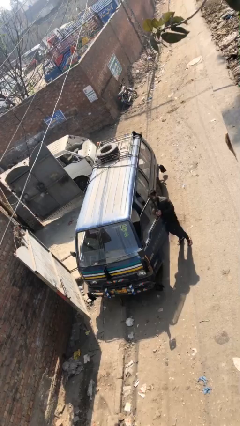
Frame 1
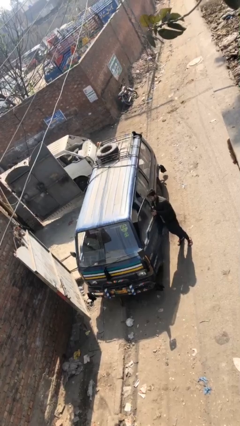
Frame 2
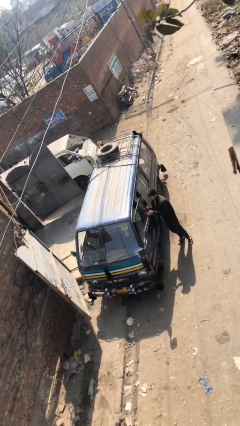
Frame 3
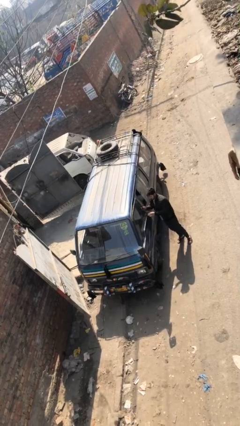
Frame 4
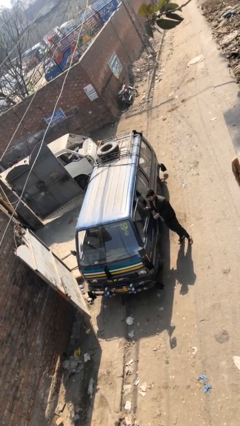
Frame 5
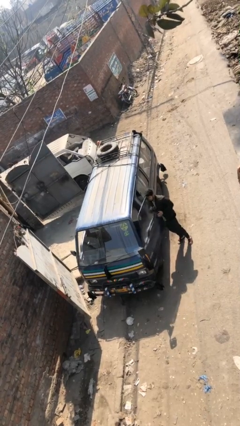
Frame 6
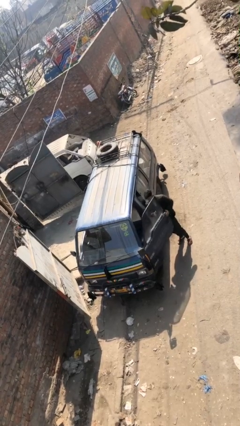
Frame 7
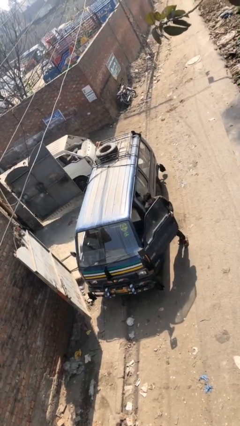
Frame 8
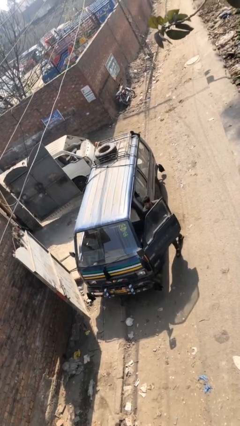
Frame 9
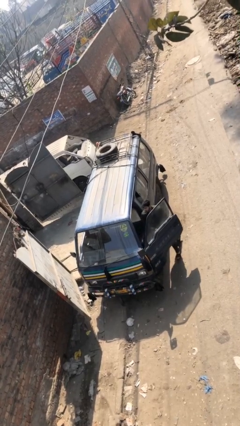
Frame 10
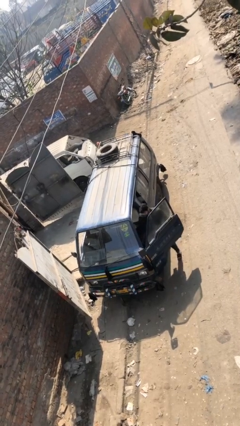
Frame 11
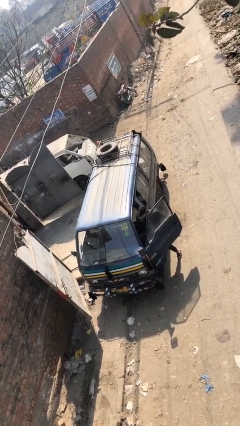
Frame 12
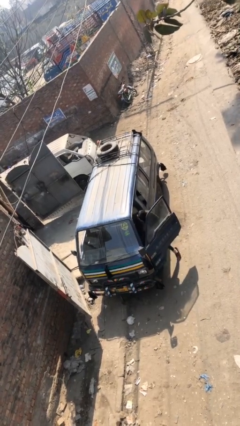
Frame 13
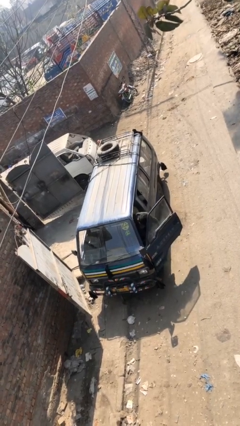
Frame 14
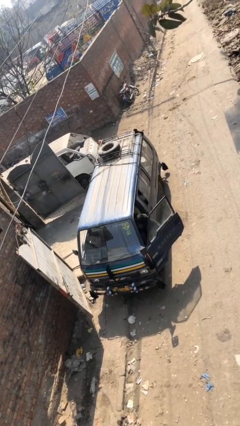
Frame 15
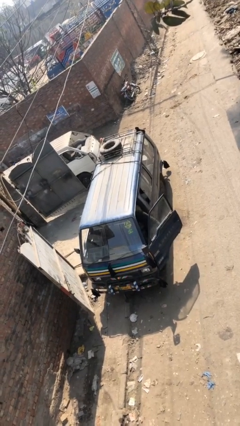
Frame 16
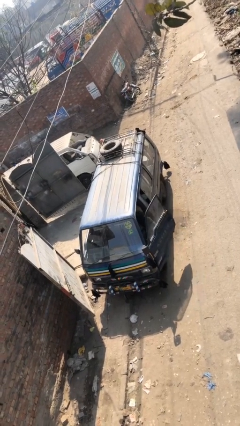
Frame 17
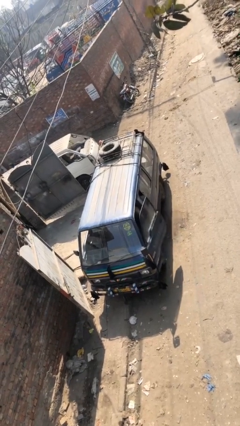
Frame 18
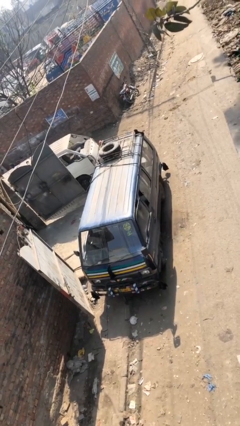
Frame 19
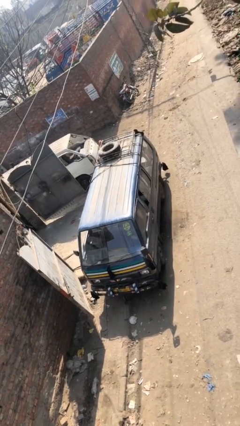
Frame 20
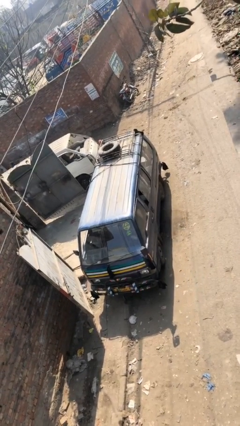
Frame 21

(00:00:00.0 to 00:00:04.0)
car picks up person

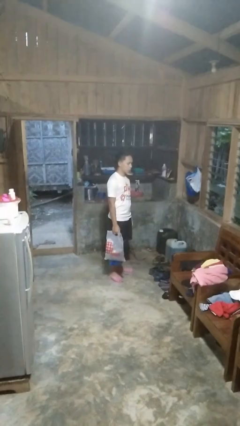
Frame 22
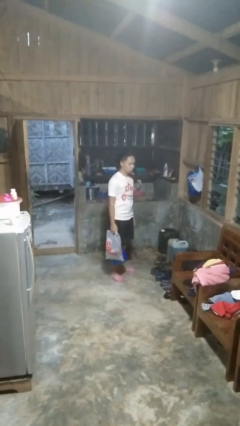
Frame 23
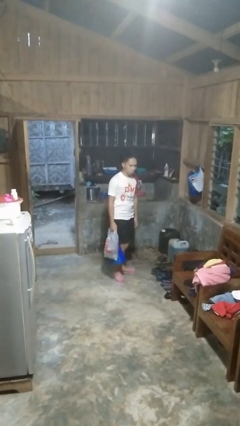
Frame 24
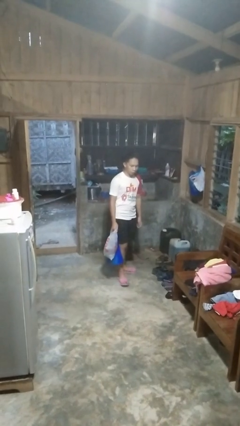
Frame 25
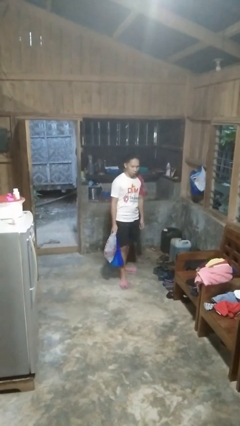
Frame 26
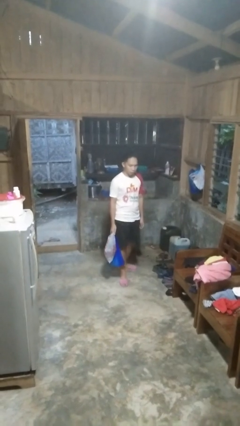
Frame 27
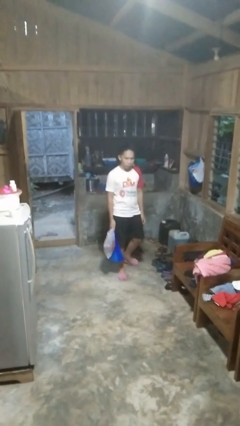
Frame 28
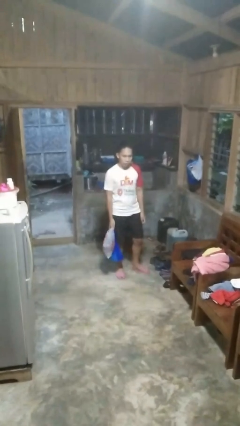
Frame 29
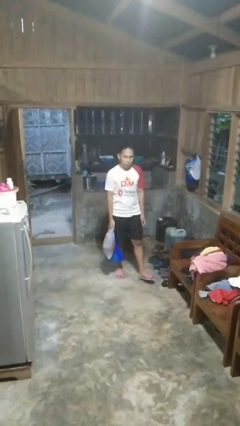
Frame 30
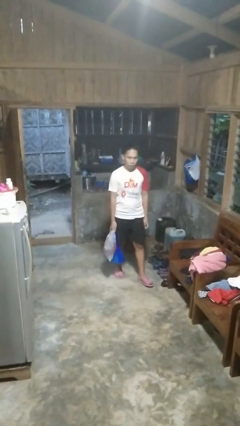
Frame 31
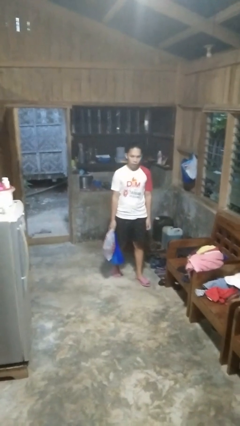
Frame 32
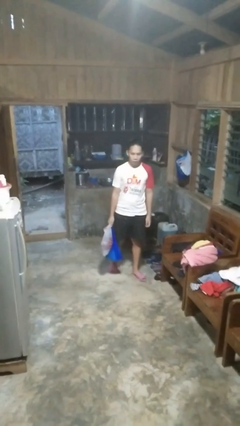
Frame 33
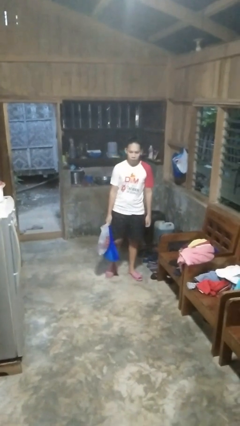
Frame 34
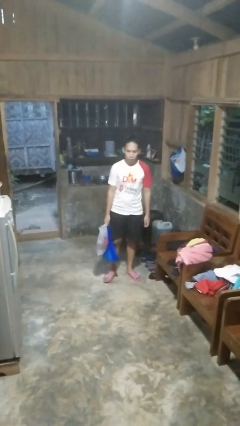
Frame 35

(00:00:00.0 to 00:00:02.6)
person carries groceries

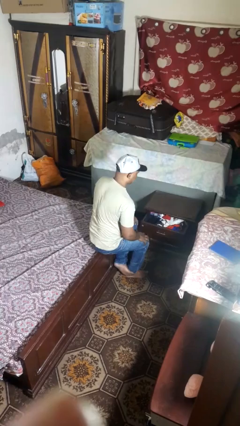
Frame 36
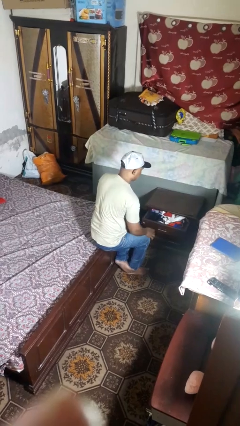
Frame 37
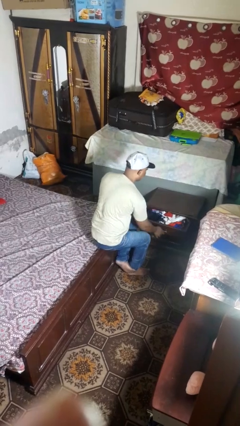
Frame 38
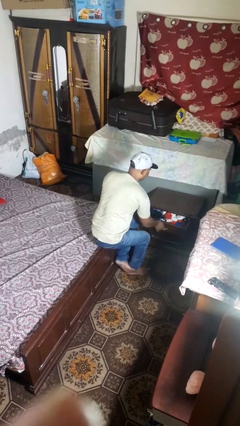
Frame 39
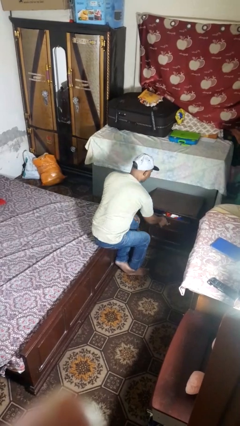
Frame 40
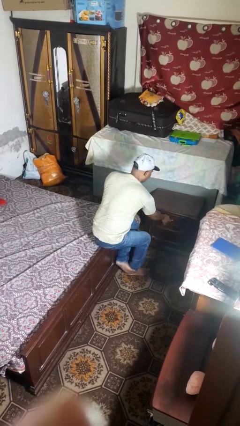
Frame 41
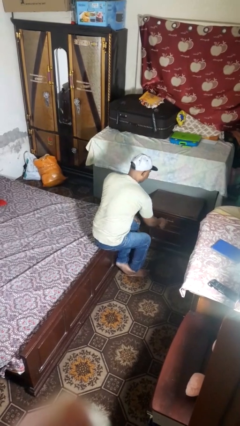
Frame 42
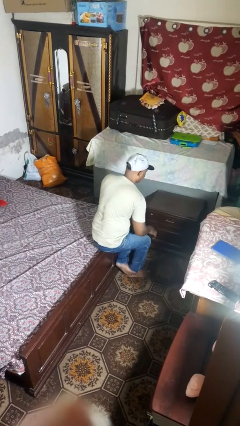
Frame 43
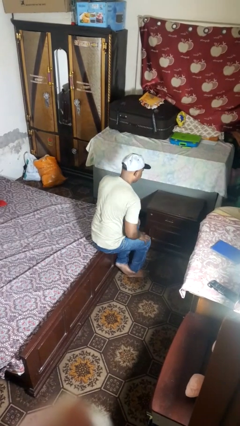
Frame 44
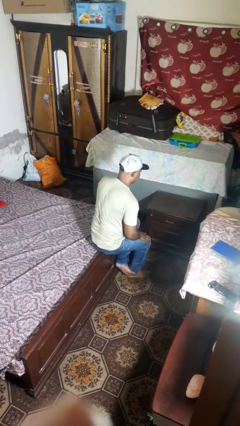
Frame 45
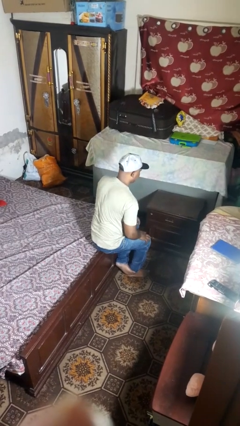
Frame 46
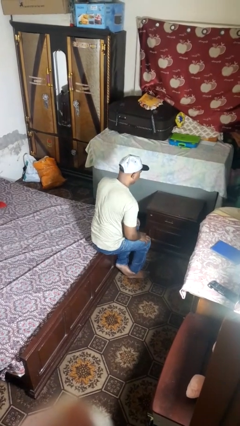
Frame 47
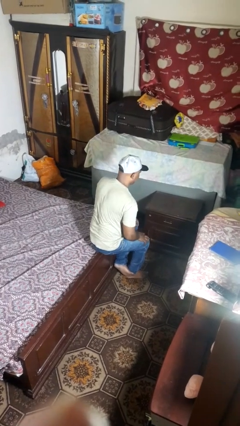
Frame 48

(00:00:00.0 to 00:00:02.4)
person closes dresser drawer

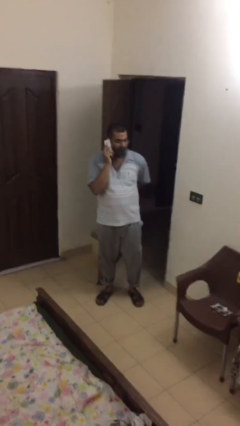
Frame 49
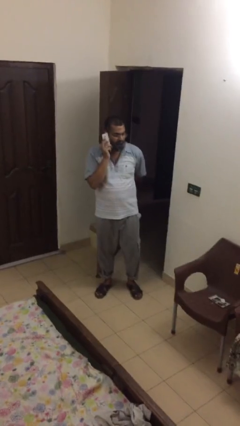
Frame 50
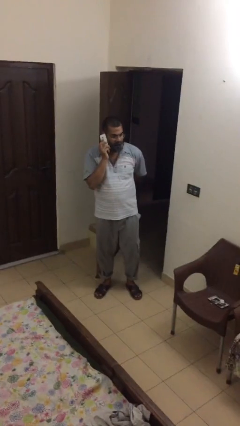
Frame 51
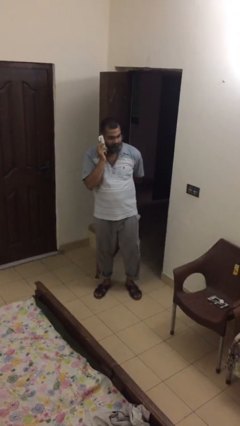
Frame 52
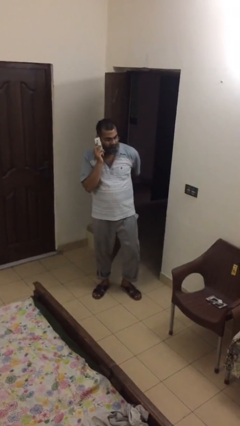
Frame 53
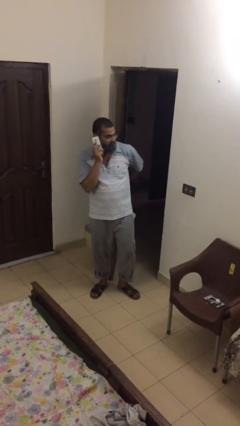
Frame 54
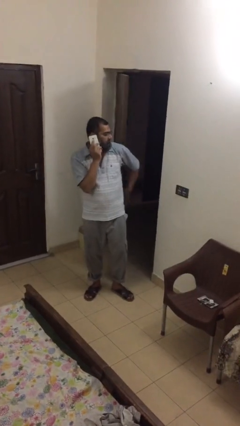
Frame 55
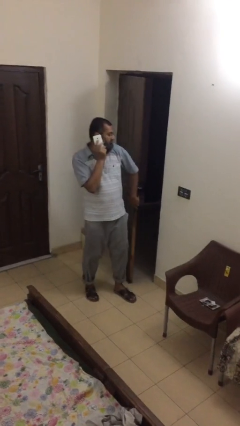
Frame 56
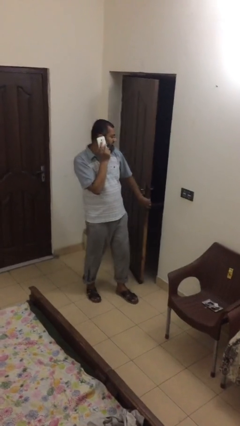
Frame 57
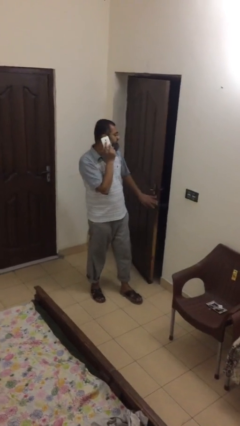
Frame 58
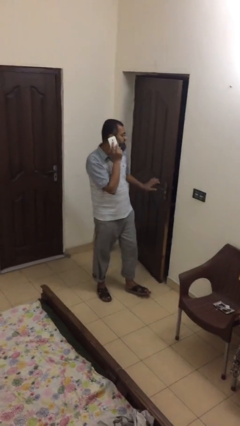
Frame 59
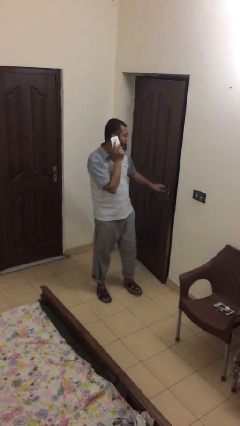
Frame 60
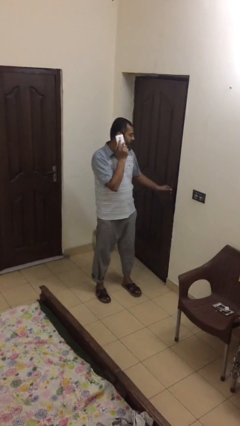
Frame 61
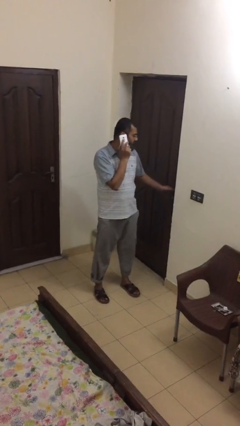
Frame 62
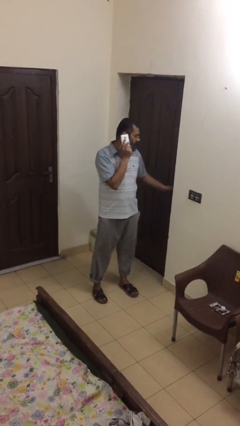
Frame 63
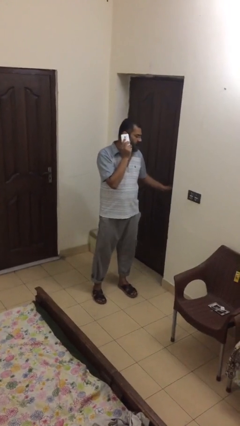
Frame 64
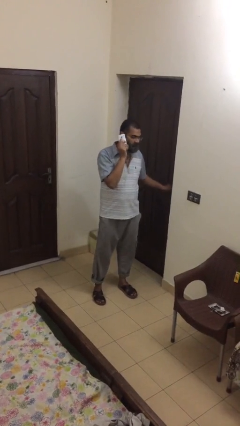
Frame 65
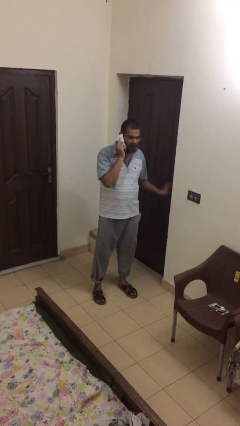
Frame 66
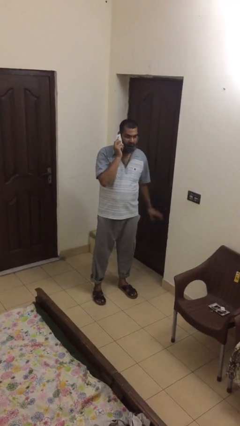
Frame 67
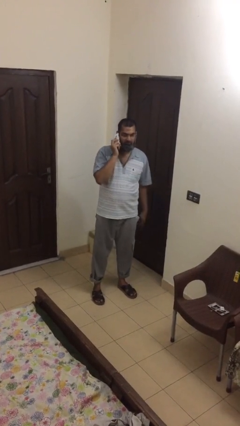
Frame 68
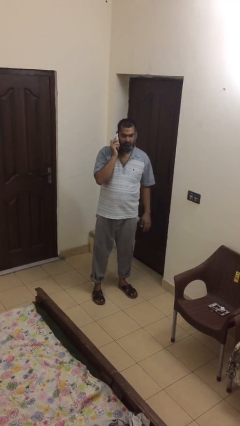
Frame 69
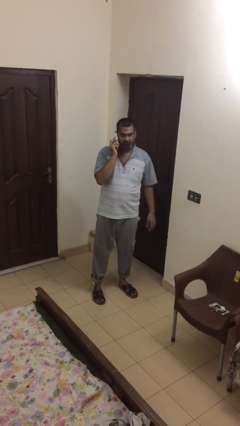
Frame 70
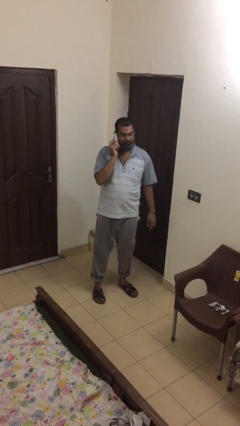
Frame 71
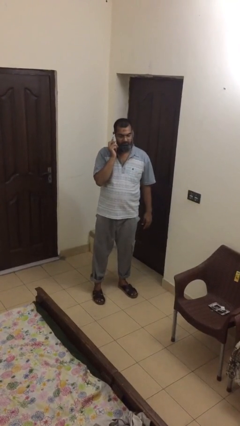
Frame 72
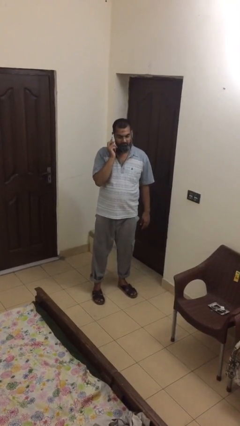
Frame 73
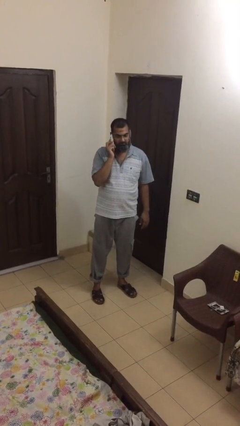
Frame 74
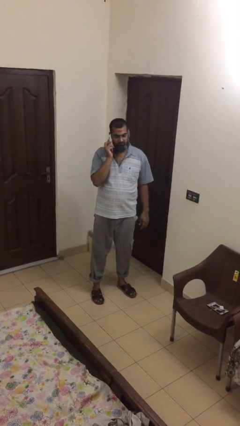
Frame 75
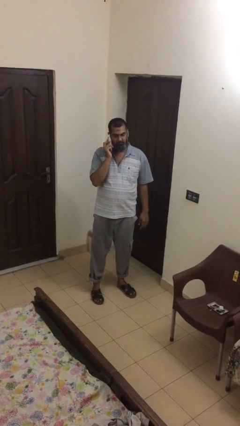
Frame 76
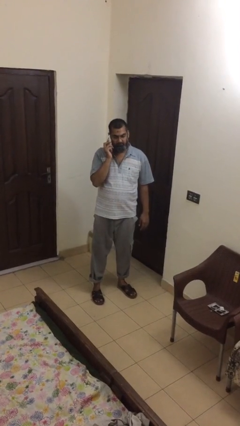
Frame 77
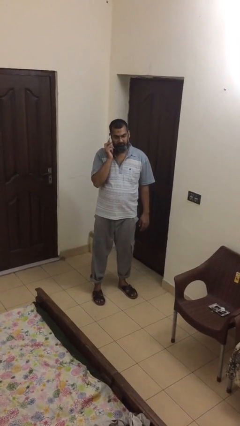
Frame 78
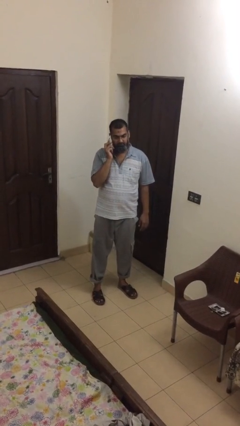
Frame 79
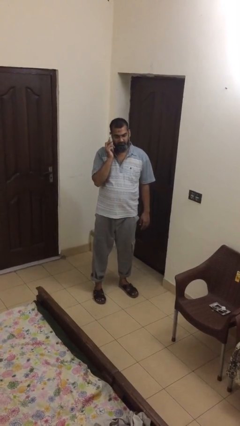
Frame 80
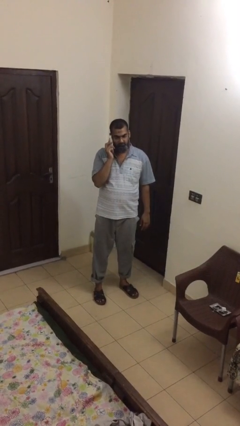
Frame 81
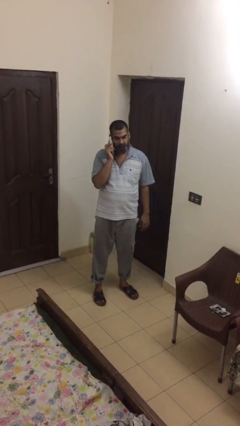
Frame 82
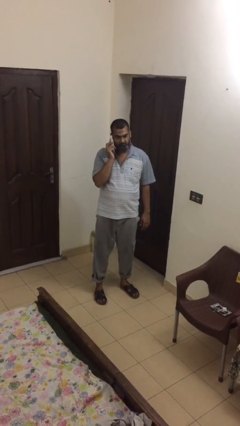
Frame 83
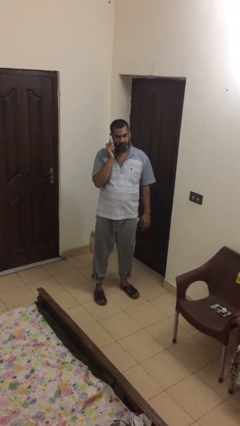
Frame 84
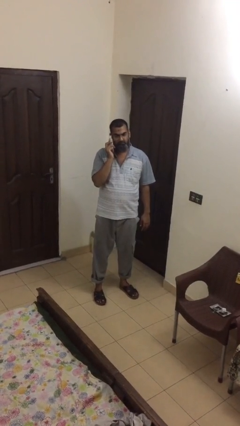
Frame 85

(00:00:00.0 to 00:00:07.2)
person closes facility door

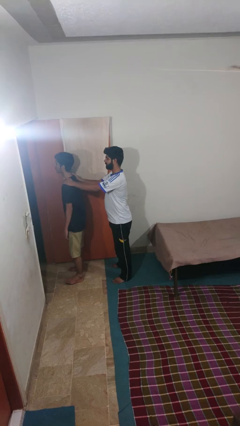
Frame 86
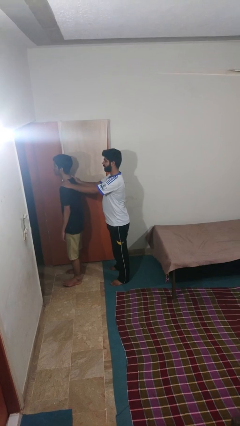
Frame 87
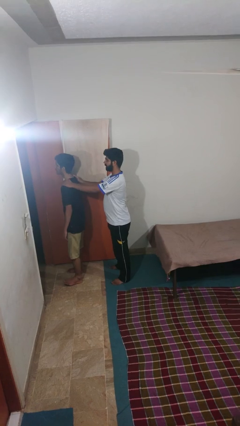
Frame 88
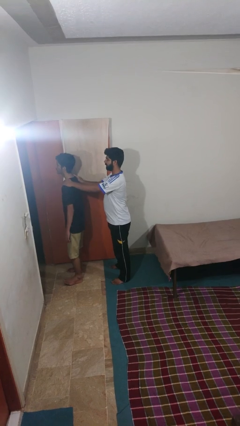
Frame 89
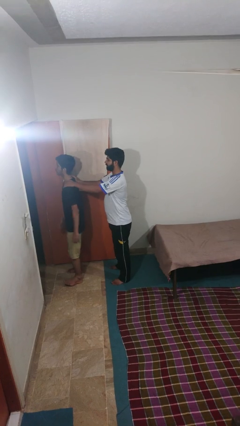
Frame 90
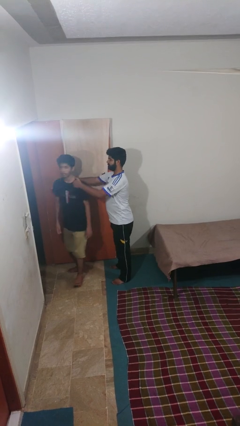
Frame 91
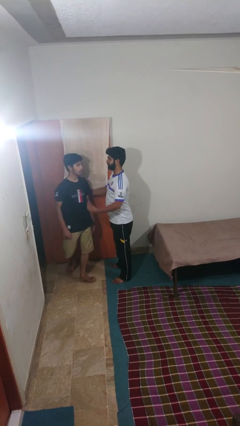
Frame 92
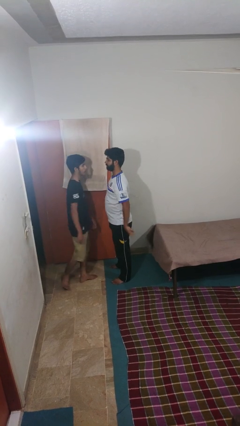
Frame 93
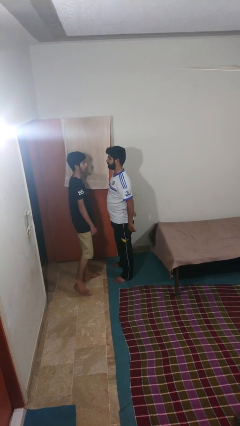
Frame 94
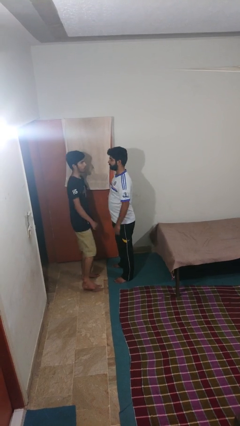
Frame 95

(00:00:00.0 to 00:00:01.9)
person spins person around
